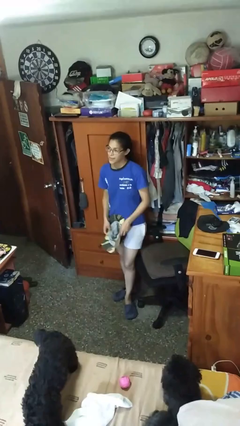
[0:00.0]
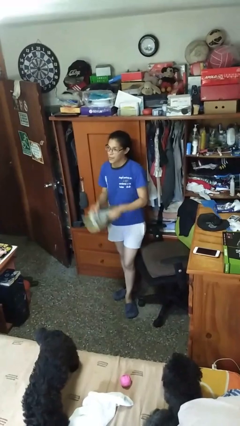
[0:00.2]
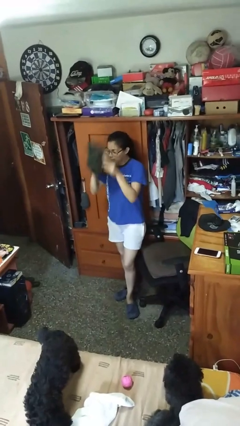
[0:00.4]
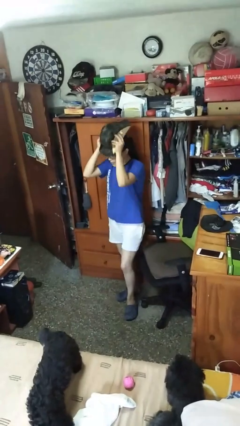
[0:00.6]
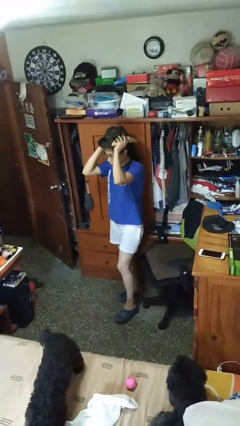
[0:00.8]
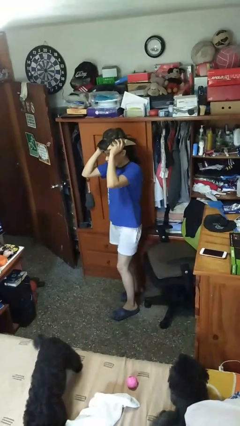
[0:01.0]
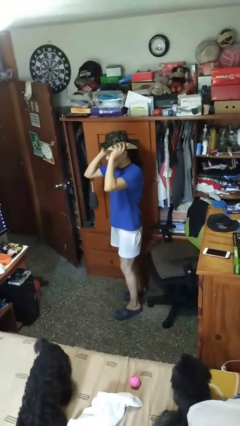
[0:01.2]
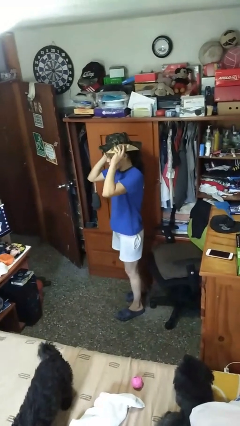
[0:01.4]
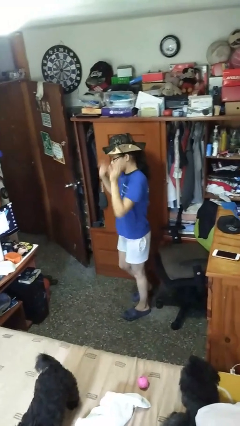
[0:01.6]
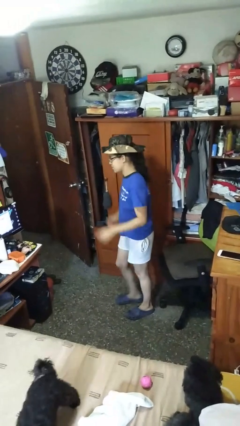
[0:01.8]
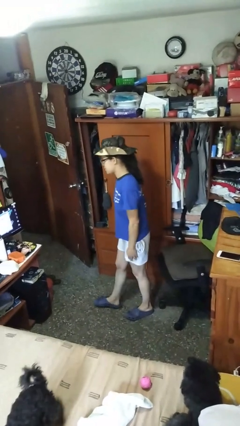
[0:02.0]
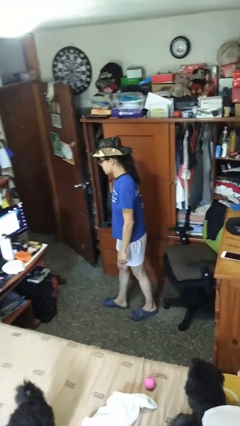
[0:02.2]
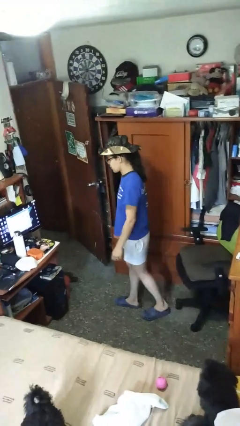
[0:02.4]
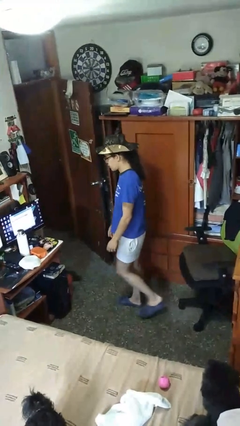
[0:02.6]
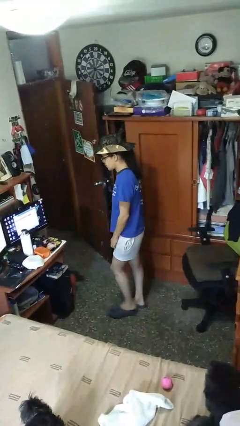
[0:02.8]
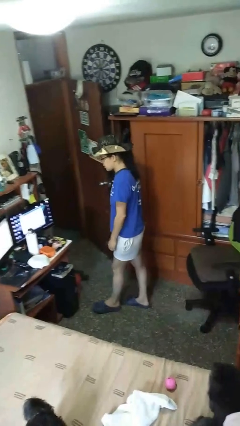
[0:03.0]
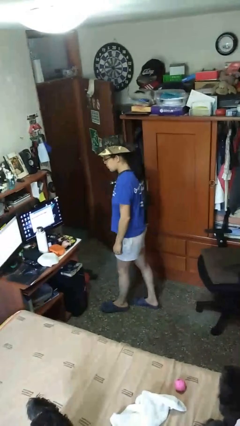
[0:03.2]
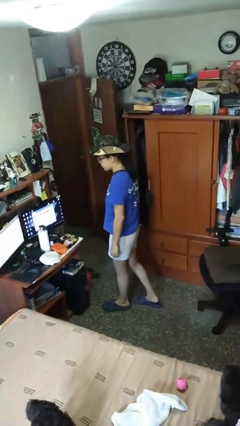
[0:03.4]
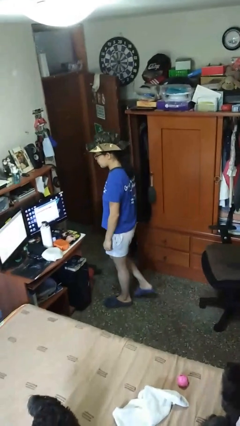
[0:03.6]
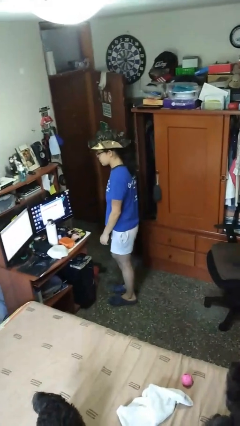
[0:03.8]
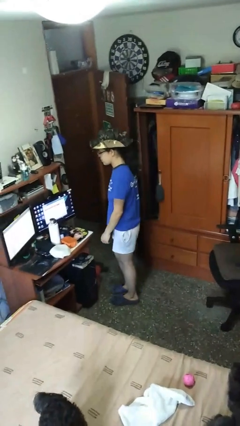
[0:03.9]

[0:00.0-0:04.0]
person puts on hat

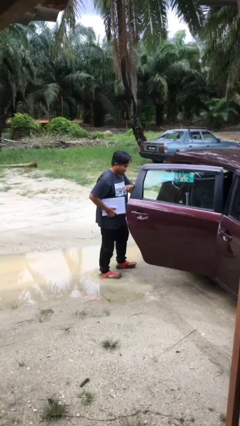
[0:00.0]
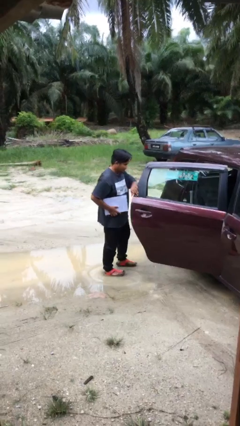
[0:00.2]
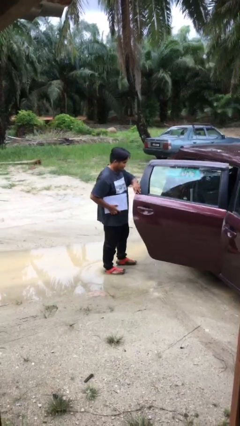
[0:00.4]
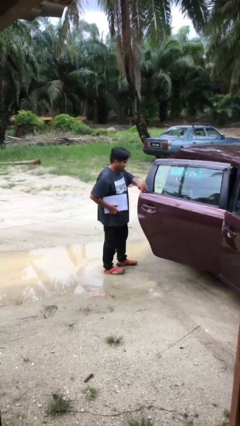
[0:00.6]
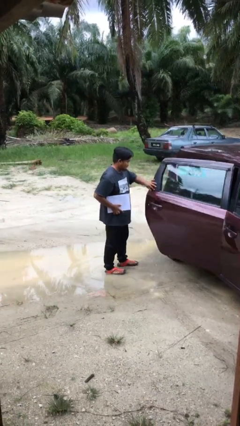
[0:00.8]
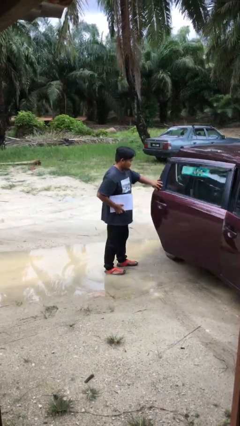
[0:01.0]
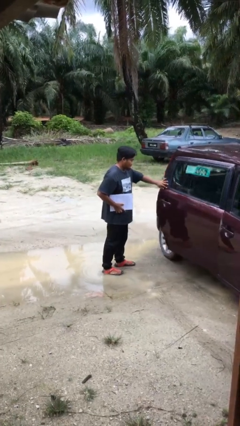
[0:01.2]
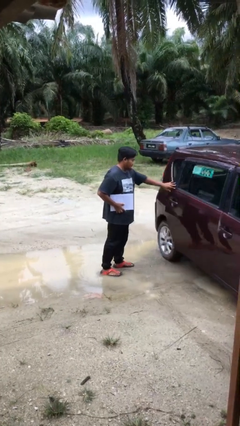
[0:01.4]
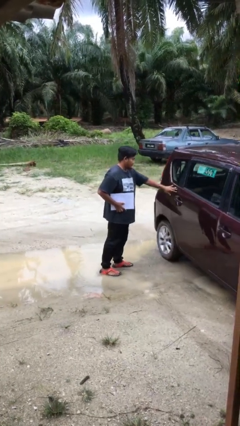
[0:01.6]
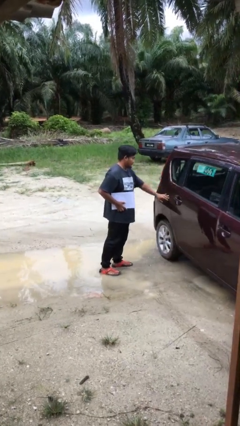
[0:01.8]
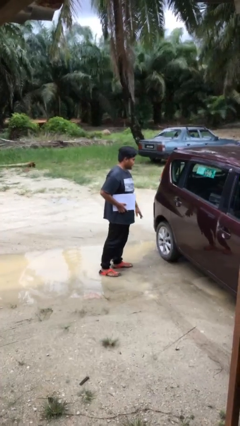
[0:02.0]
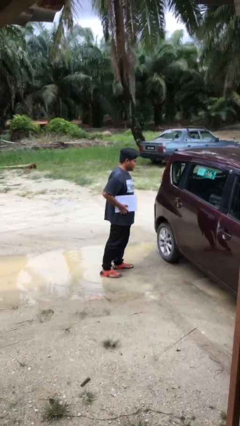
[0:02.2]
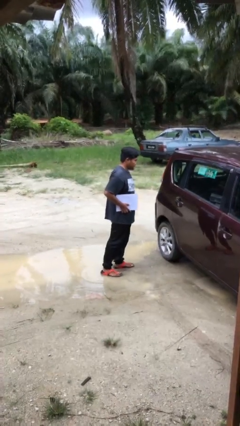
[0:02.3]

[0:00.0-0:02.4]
person closes car door

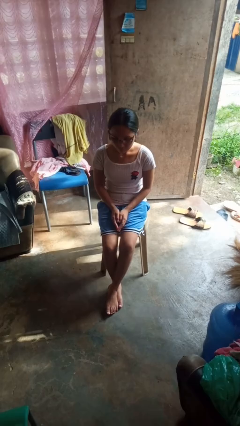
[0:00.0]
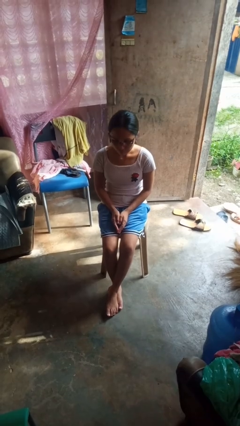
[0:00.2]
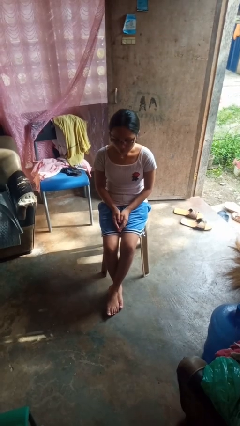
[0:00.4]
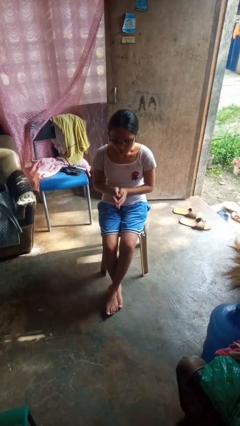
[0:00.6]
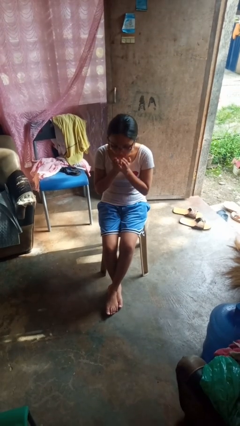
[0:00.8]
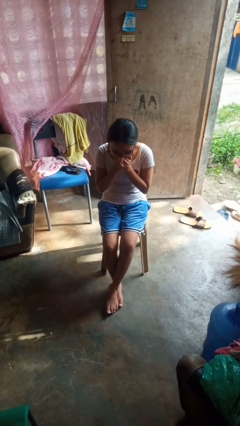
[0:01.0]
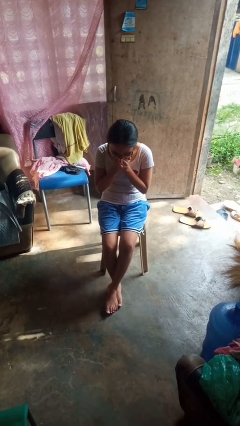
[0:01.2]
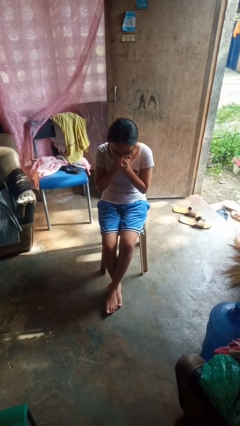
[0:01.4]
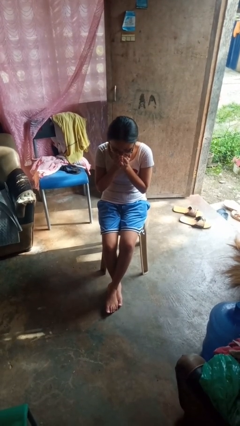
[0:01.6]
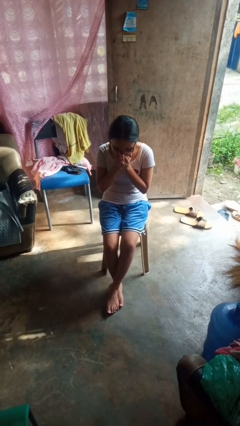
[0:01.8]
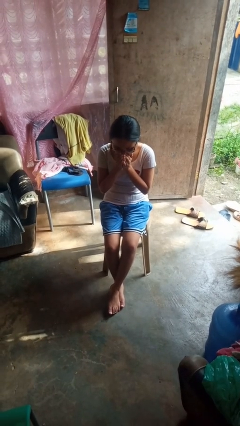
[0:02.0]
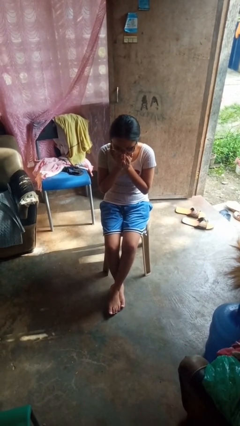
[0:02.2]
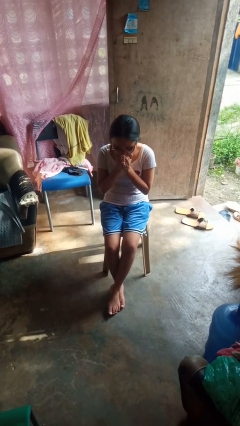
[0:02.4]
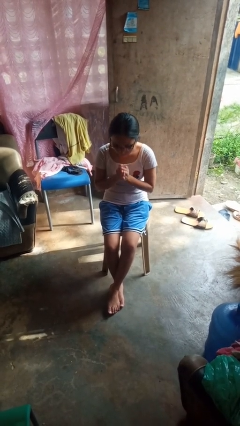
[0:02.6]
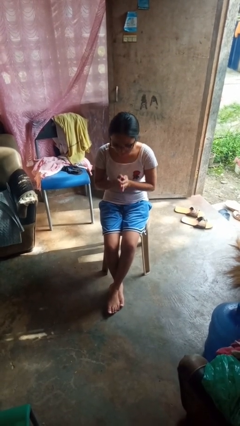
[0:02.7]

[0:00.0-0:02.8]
person sneezes into hand

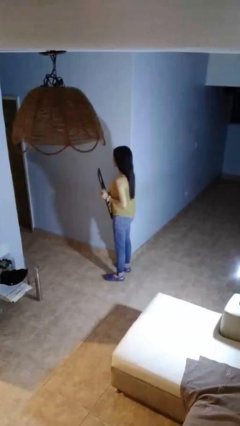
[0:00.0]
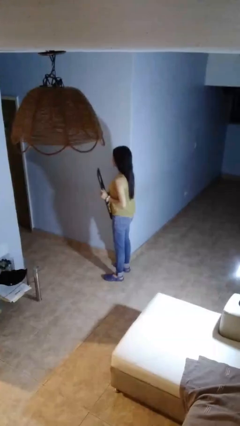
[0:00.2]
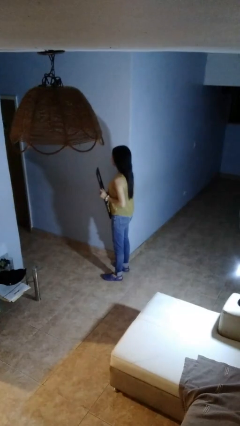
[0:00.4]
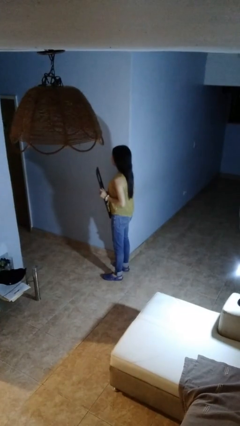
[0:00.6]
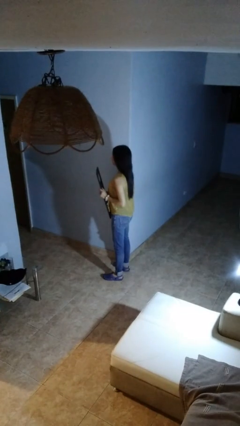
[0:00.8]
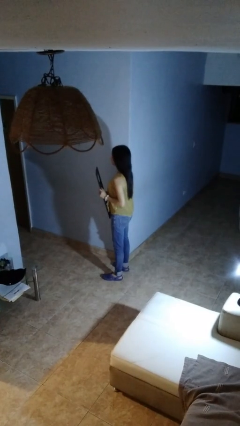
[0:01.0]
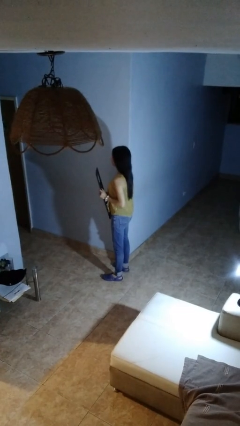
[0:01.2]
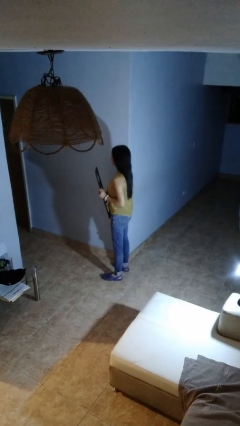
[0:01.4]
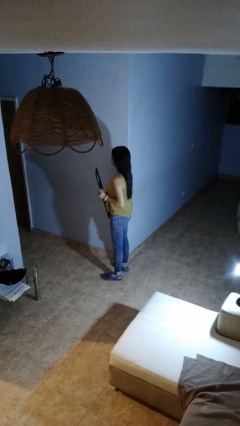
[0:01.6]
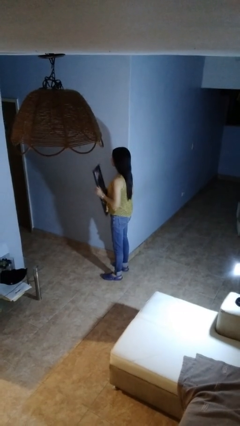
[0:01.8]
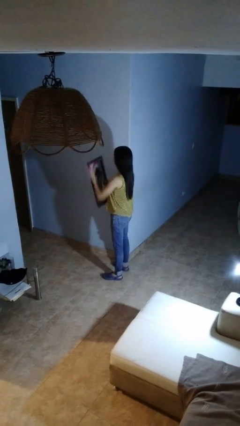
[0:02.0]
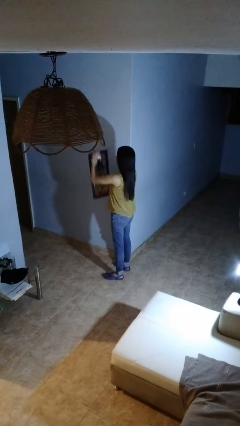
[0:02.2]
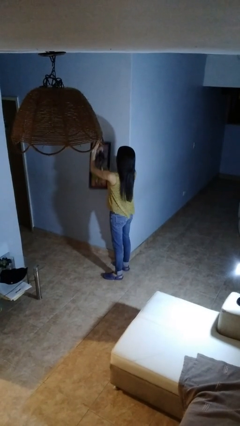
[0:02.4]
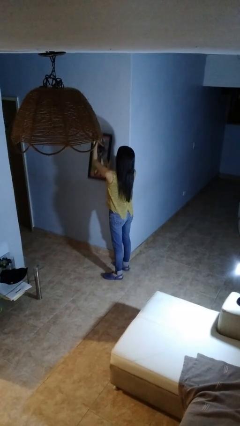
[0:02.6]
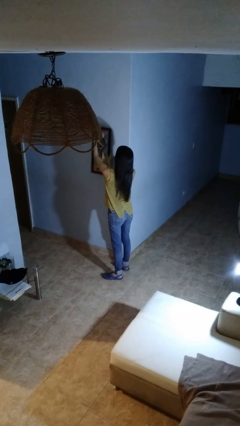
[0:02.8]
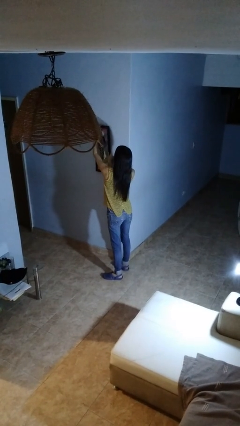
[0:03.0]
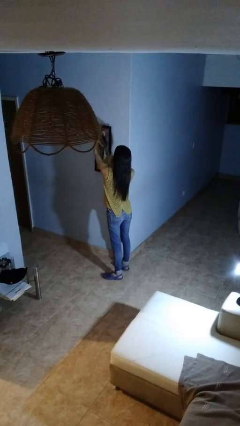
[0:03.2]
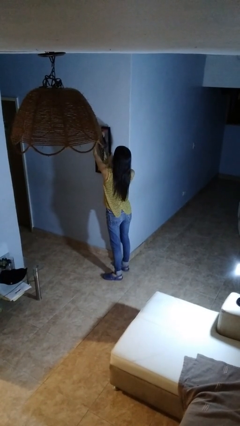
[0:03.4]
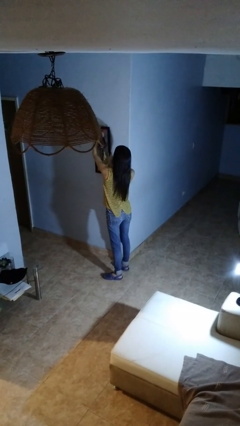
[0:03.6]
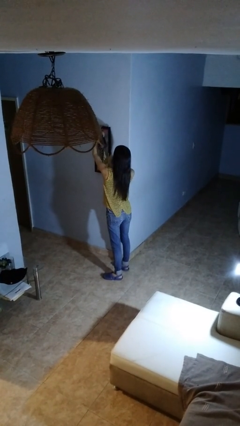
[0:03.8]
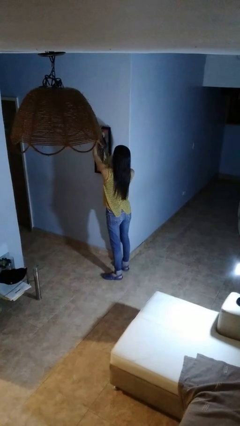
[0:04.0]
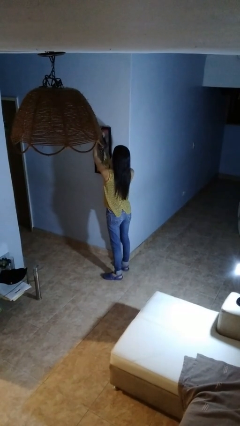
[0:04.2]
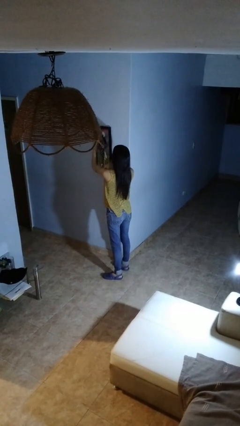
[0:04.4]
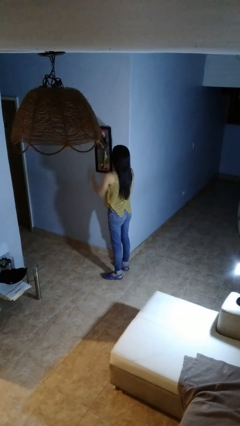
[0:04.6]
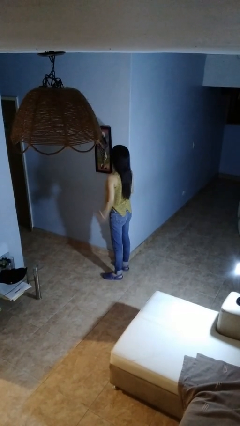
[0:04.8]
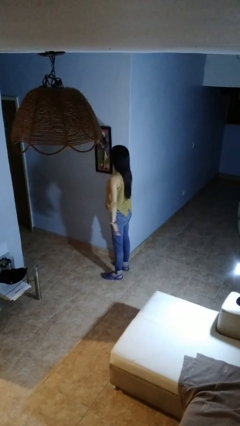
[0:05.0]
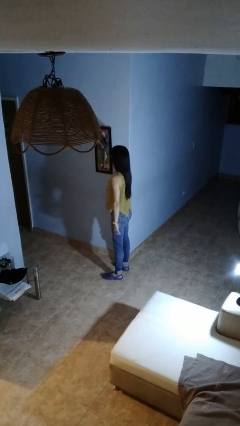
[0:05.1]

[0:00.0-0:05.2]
person puts up picture frame

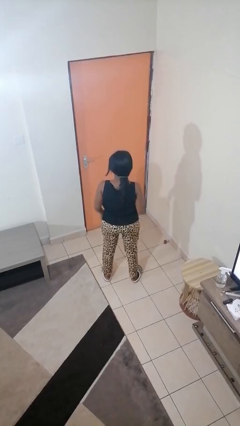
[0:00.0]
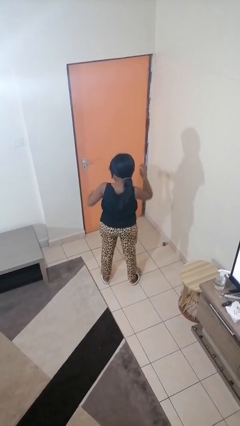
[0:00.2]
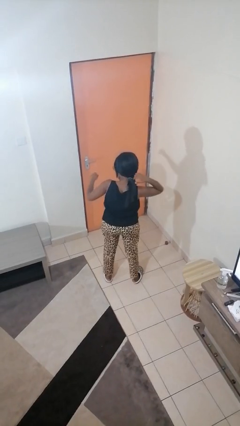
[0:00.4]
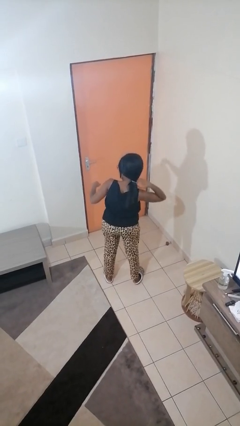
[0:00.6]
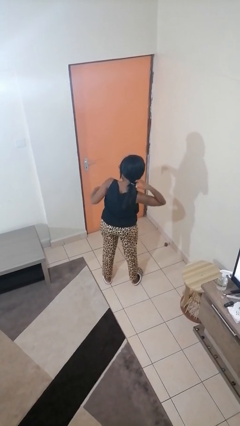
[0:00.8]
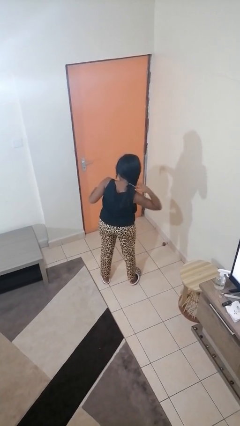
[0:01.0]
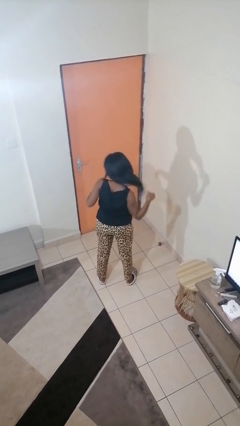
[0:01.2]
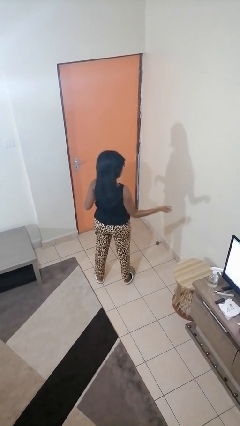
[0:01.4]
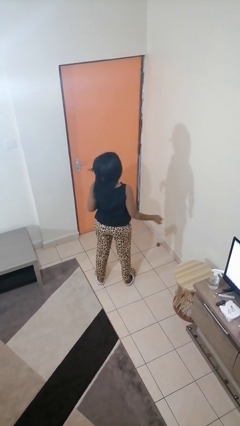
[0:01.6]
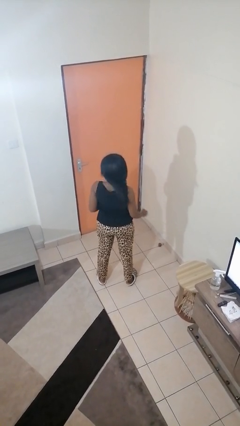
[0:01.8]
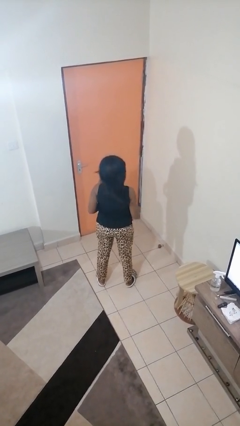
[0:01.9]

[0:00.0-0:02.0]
person takes off hairtie

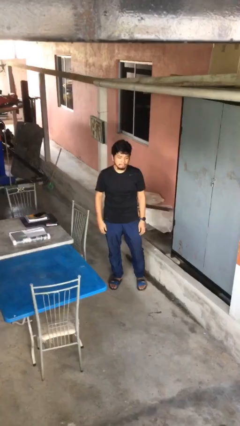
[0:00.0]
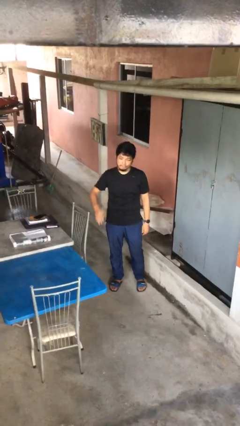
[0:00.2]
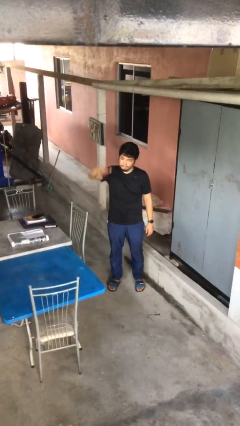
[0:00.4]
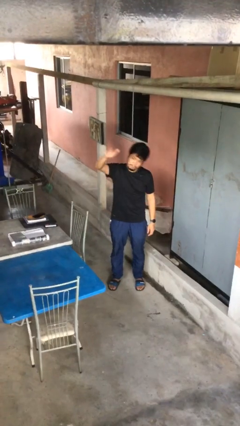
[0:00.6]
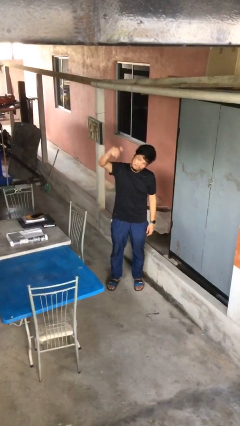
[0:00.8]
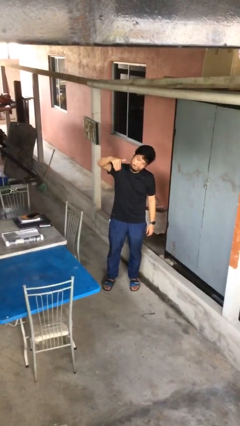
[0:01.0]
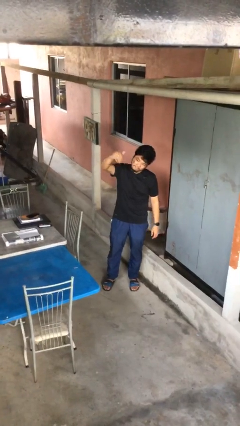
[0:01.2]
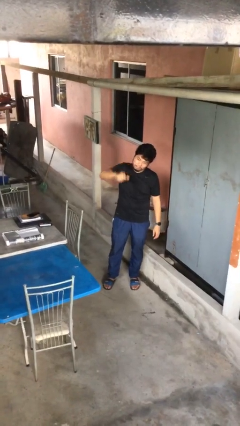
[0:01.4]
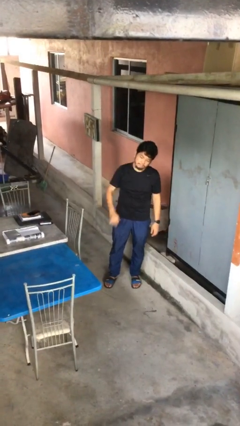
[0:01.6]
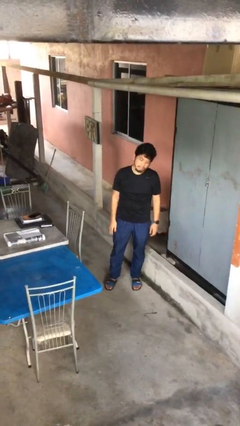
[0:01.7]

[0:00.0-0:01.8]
person gestures come here
